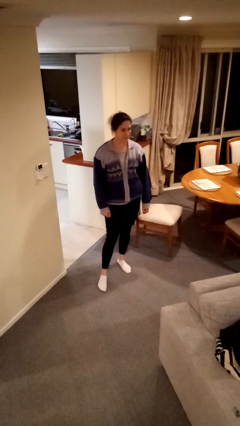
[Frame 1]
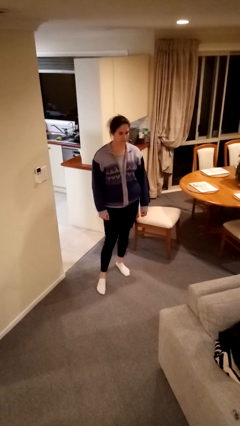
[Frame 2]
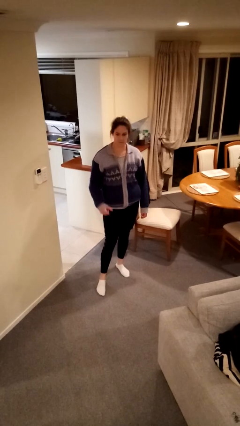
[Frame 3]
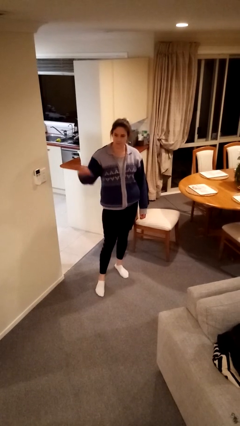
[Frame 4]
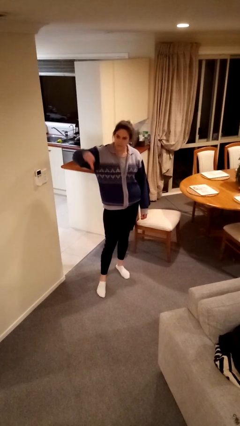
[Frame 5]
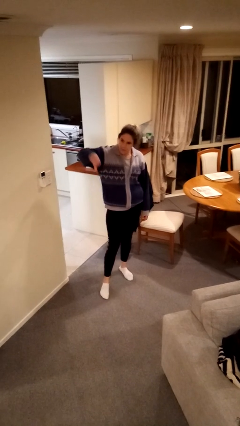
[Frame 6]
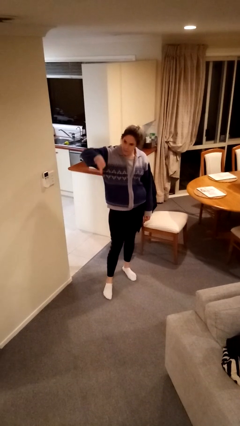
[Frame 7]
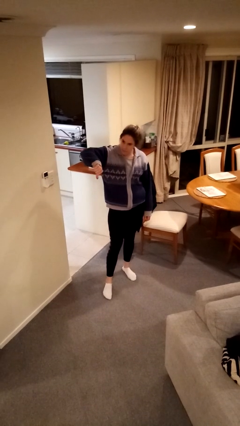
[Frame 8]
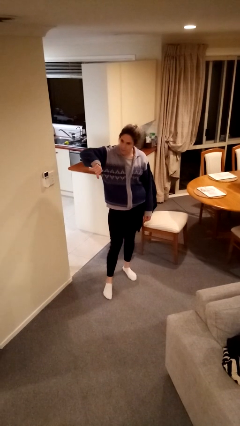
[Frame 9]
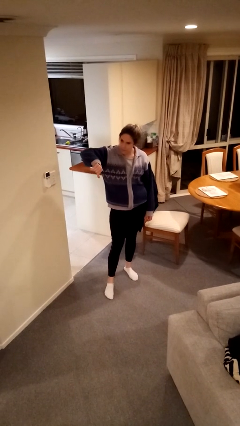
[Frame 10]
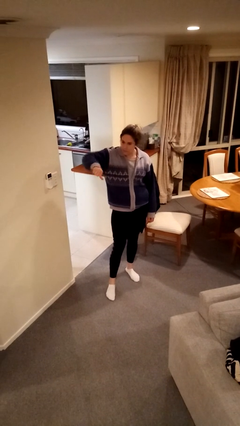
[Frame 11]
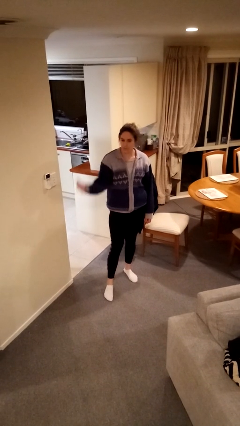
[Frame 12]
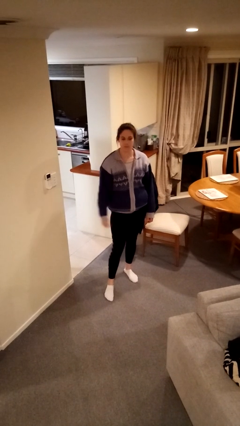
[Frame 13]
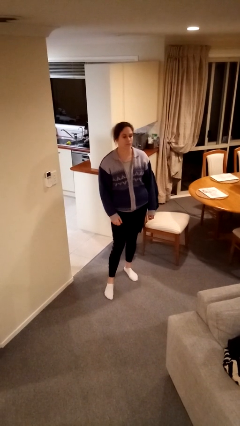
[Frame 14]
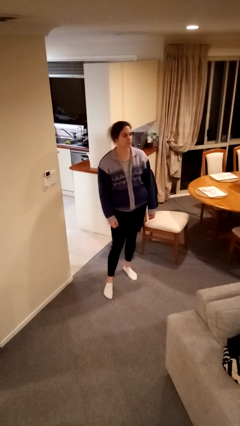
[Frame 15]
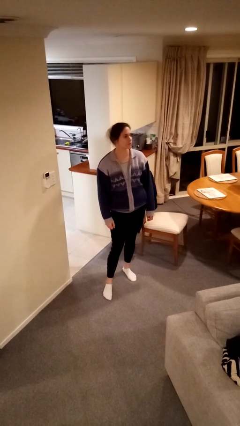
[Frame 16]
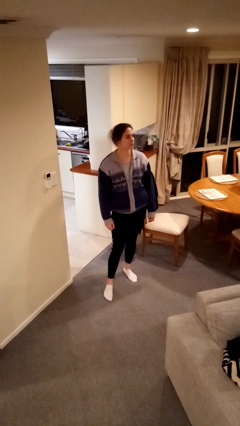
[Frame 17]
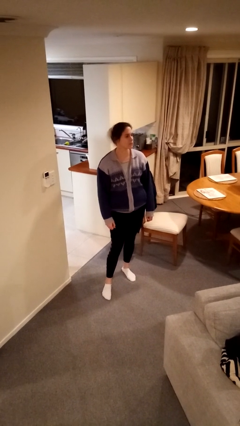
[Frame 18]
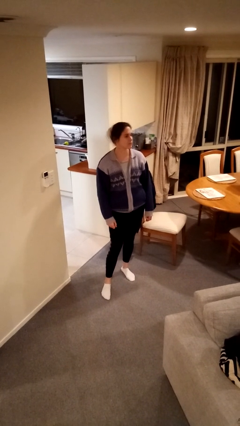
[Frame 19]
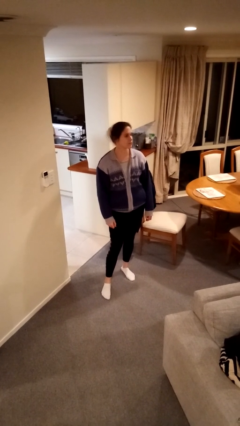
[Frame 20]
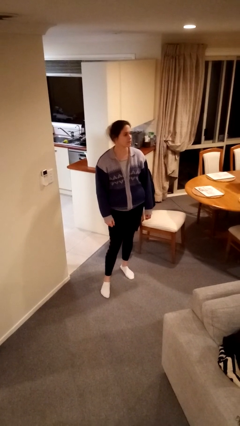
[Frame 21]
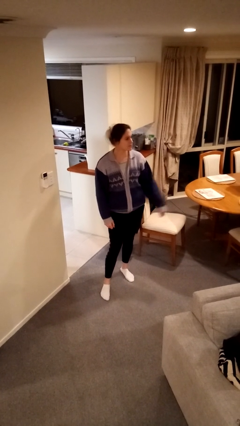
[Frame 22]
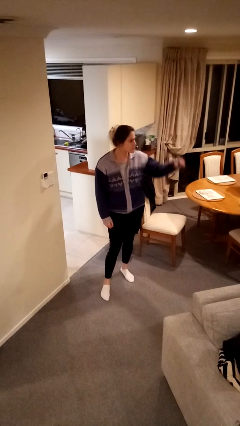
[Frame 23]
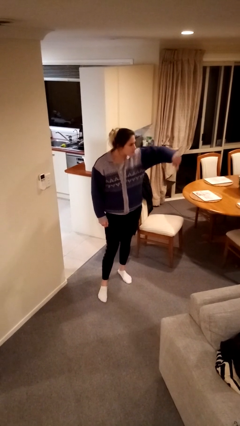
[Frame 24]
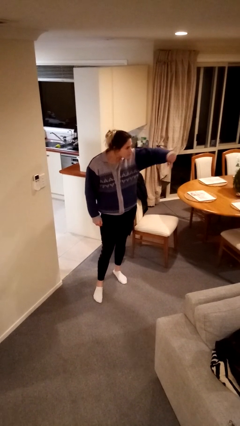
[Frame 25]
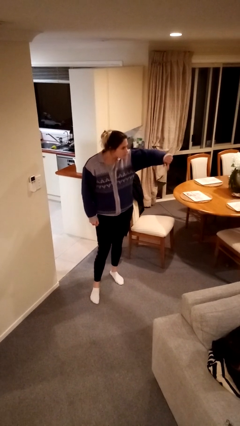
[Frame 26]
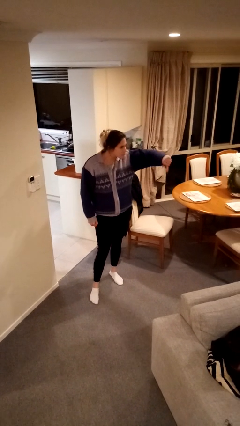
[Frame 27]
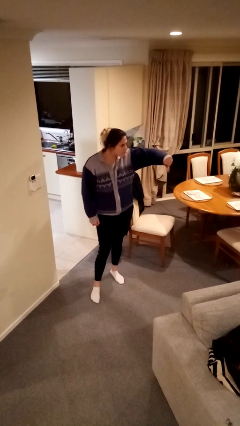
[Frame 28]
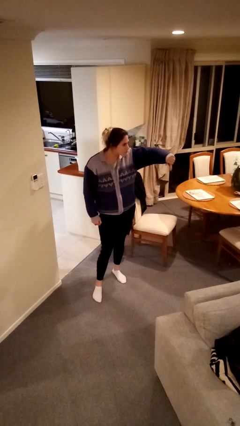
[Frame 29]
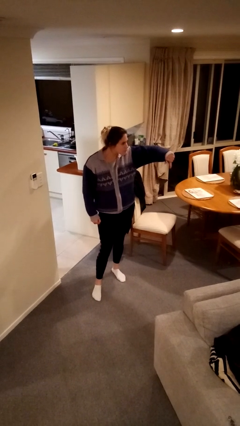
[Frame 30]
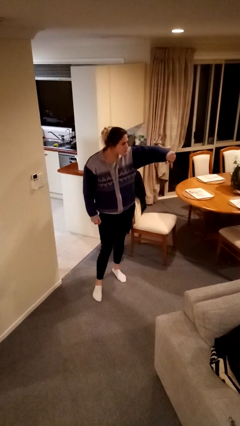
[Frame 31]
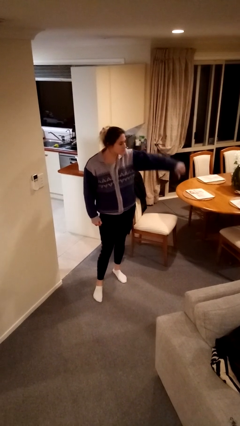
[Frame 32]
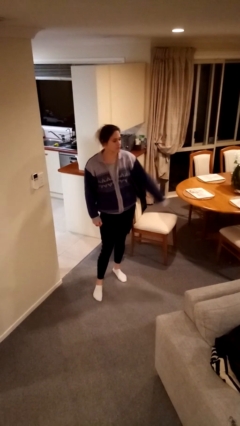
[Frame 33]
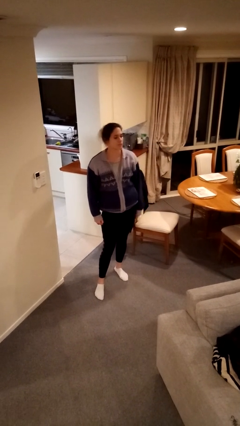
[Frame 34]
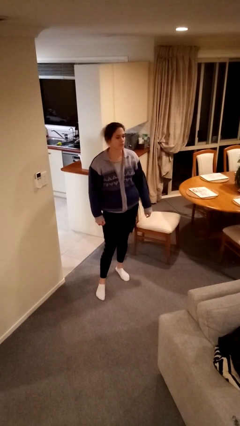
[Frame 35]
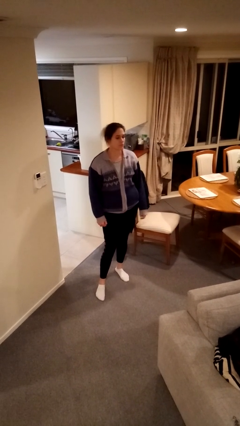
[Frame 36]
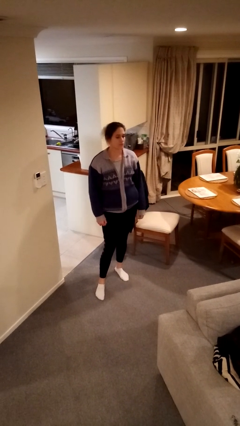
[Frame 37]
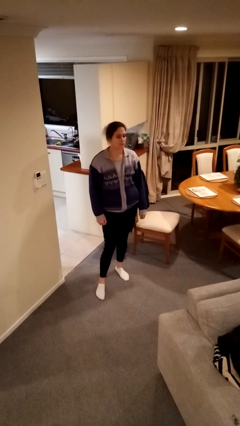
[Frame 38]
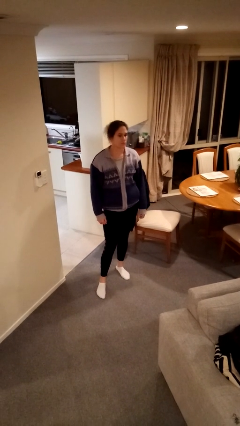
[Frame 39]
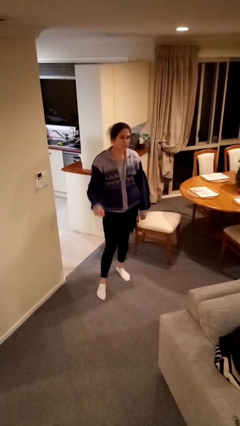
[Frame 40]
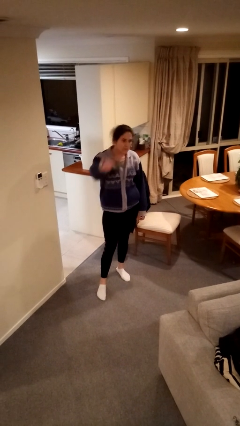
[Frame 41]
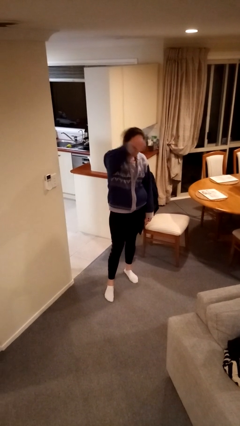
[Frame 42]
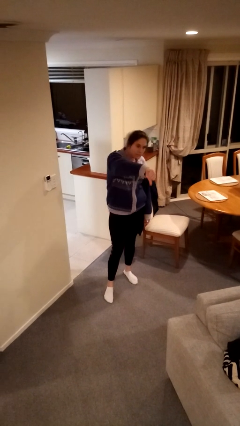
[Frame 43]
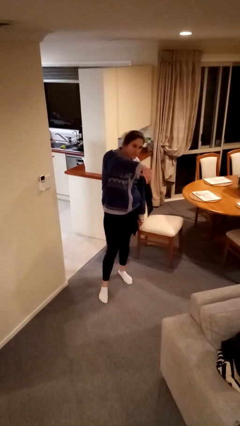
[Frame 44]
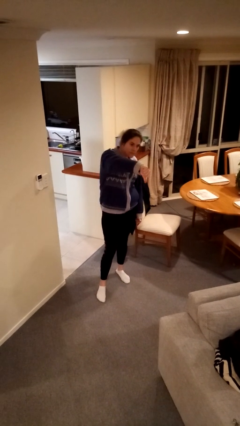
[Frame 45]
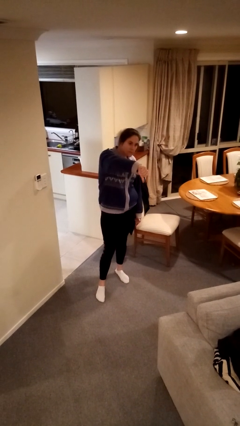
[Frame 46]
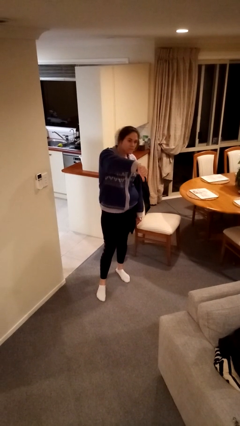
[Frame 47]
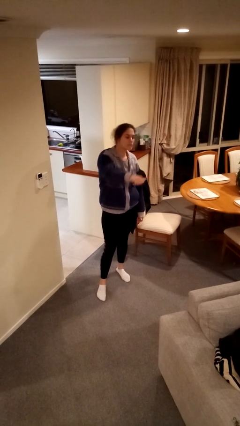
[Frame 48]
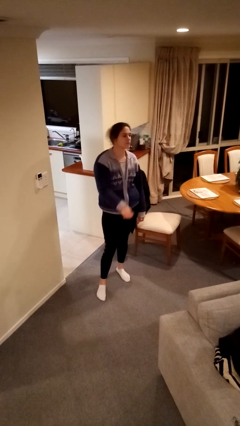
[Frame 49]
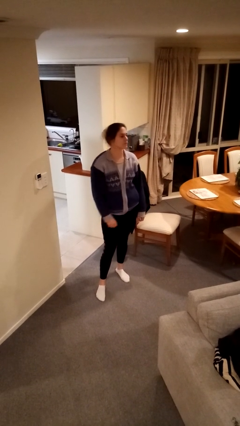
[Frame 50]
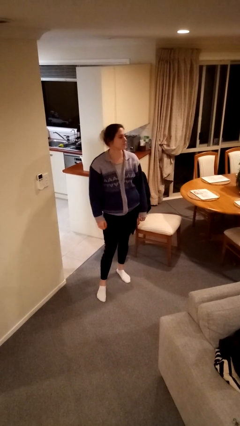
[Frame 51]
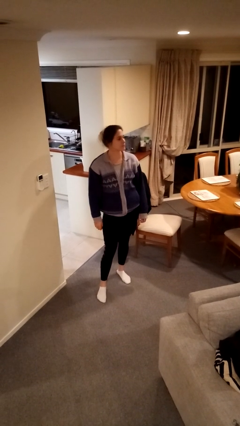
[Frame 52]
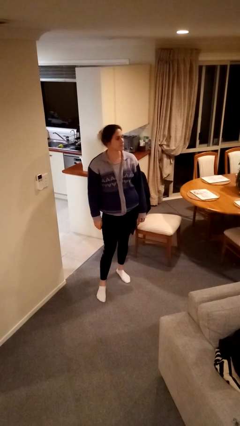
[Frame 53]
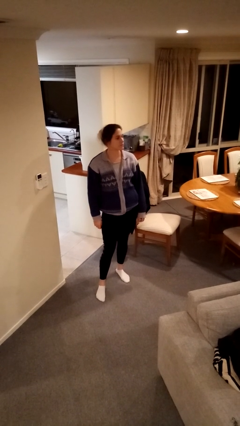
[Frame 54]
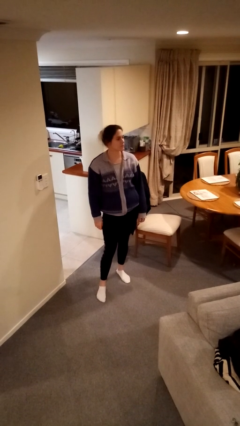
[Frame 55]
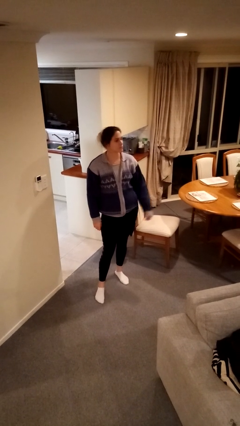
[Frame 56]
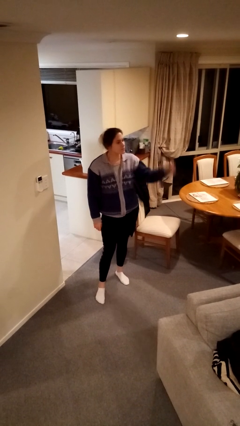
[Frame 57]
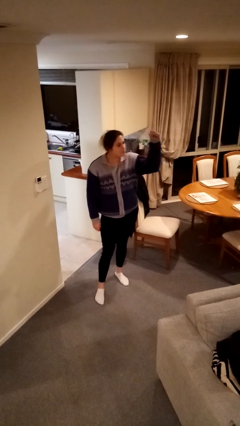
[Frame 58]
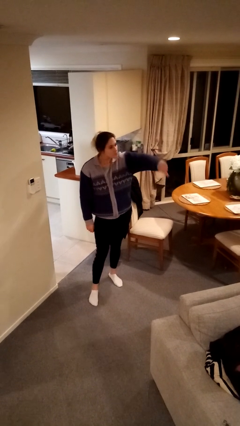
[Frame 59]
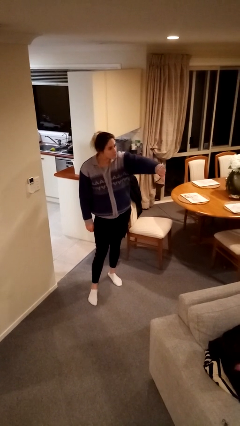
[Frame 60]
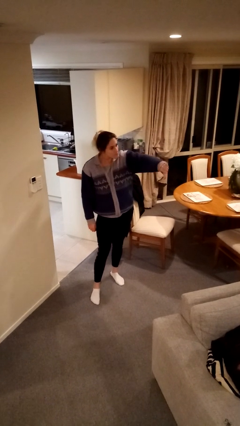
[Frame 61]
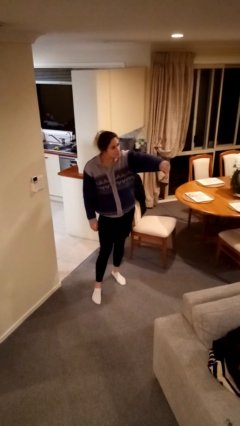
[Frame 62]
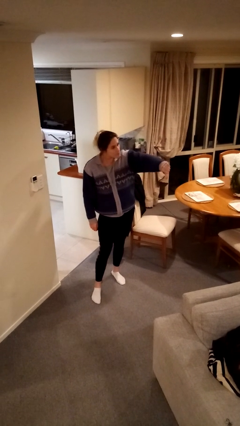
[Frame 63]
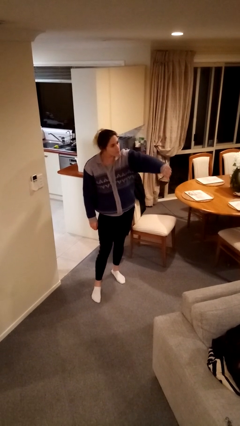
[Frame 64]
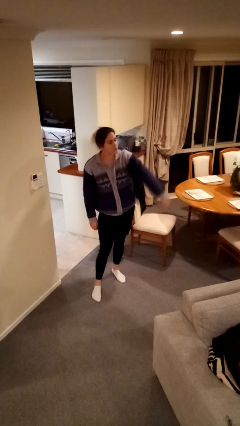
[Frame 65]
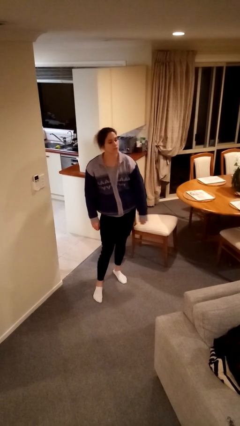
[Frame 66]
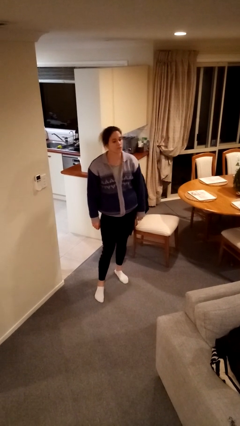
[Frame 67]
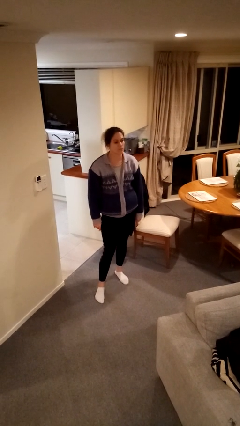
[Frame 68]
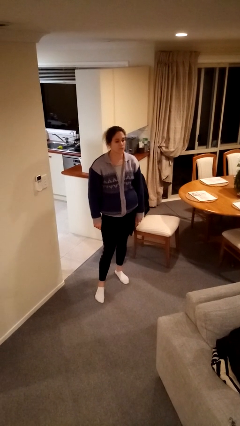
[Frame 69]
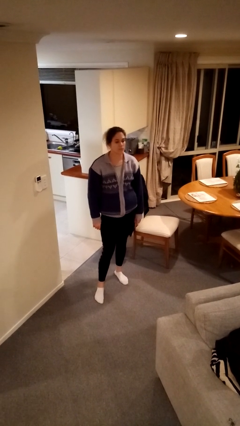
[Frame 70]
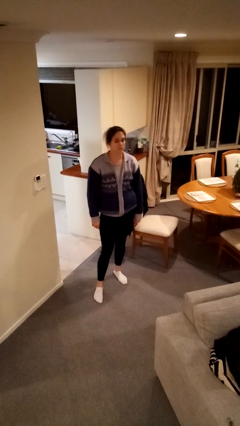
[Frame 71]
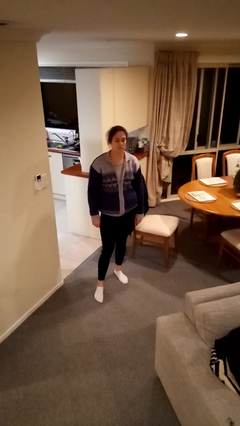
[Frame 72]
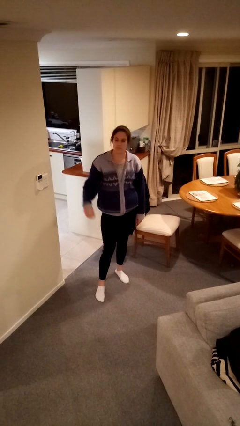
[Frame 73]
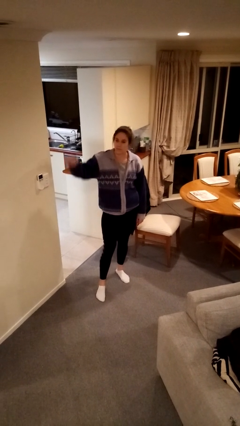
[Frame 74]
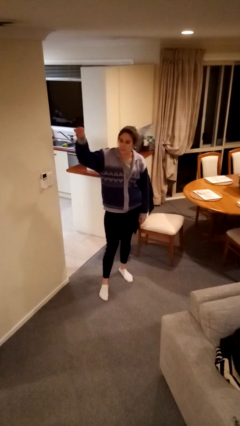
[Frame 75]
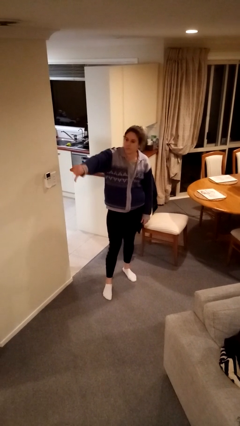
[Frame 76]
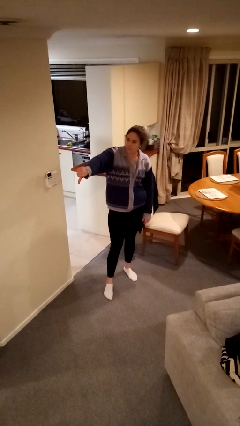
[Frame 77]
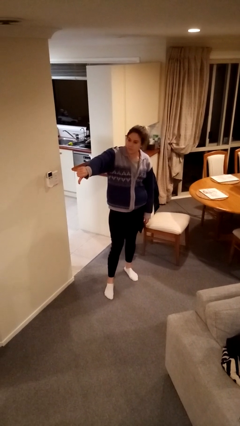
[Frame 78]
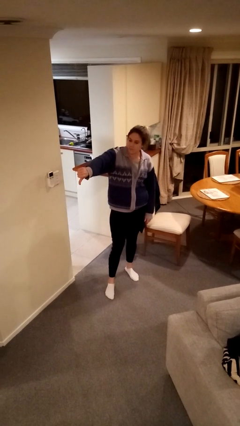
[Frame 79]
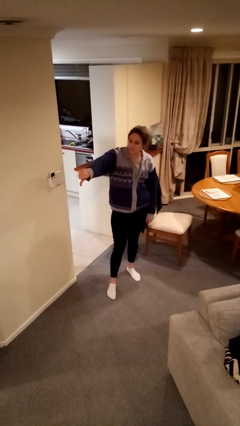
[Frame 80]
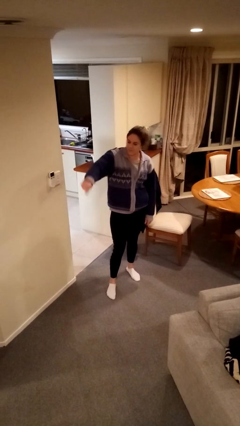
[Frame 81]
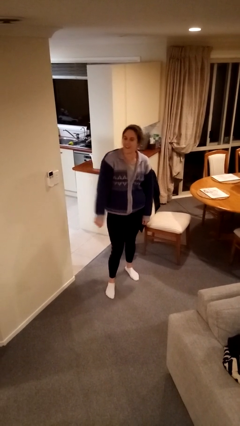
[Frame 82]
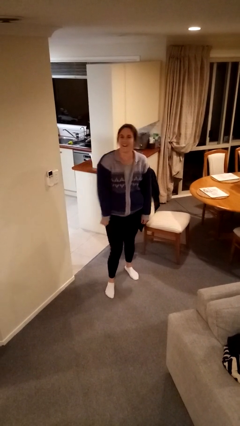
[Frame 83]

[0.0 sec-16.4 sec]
person gestures thumbs down

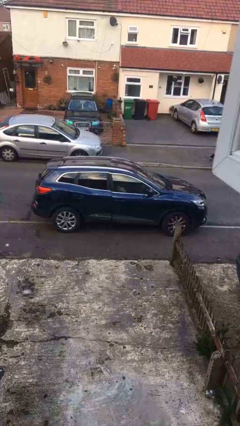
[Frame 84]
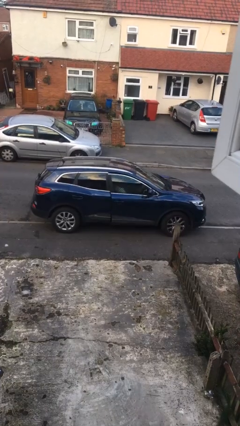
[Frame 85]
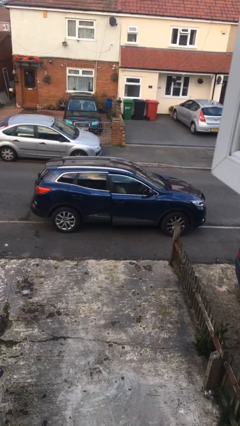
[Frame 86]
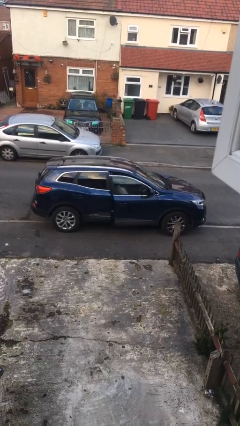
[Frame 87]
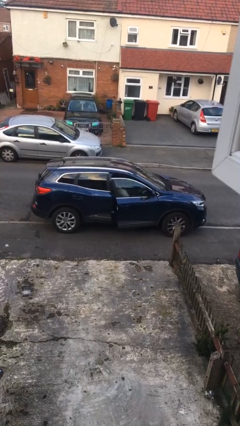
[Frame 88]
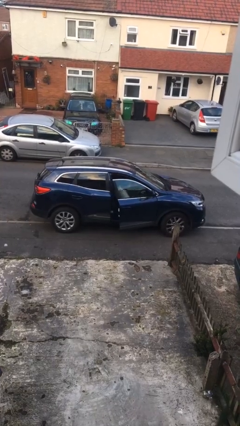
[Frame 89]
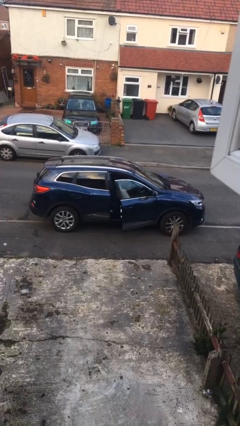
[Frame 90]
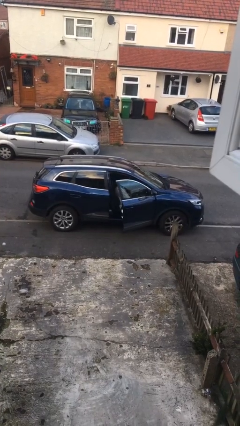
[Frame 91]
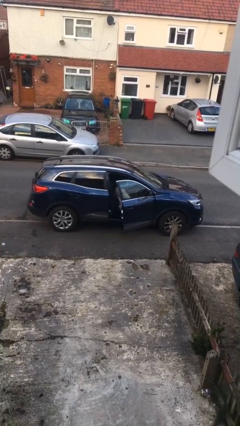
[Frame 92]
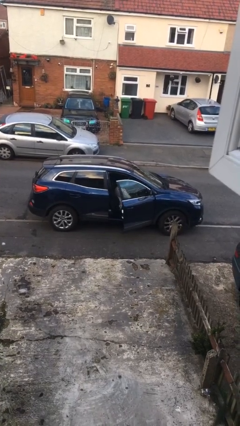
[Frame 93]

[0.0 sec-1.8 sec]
person opens car door
